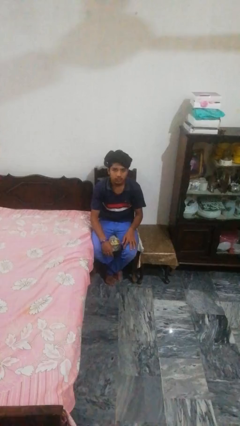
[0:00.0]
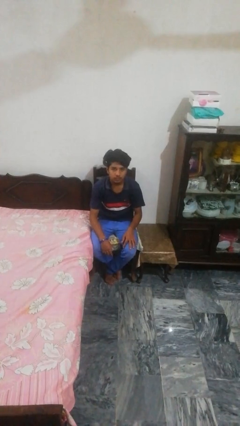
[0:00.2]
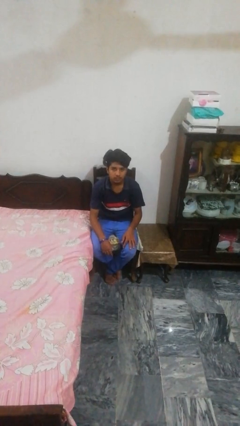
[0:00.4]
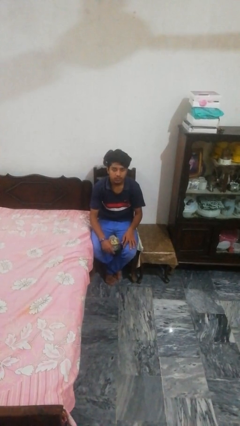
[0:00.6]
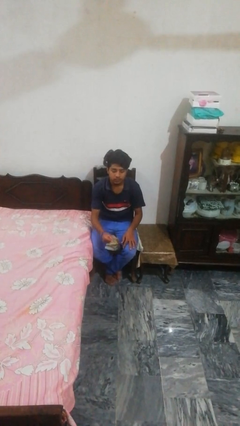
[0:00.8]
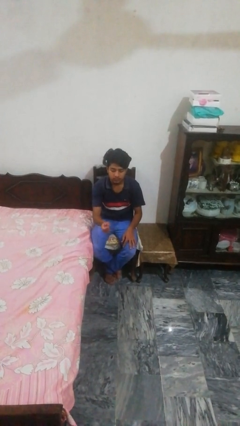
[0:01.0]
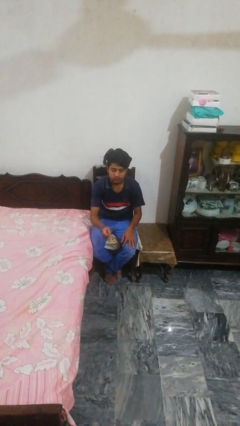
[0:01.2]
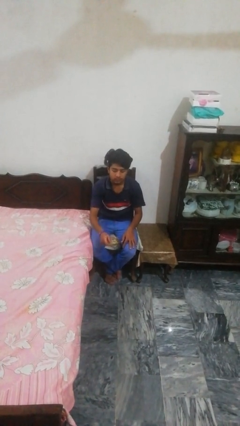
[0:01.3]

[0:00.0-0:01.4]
person snaps fingers

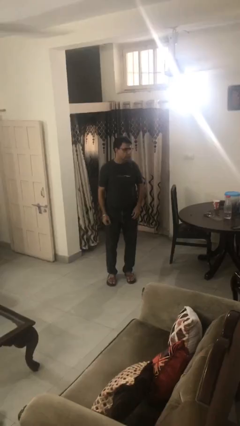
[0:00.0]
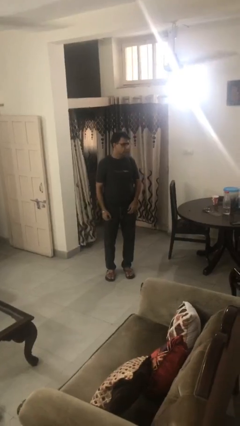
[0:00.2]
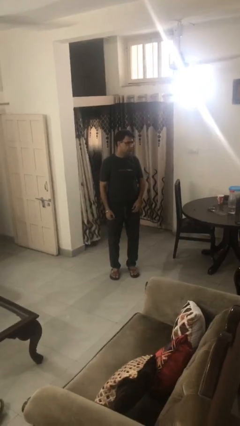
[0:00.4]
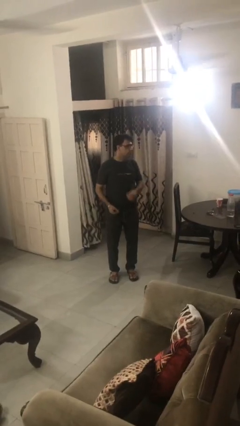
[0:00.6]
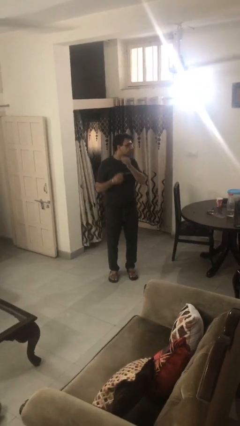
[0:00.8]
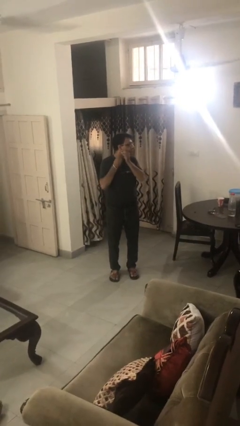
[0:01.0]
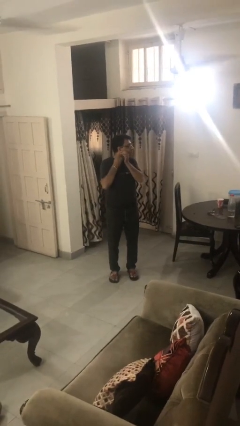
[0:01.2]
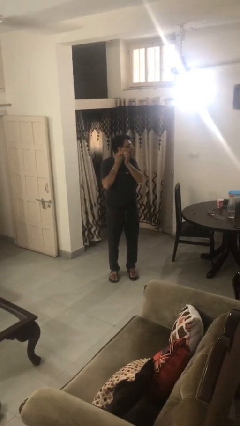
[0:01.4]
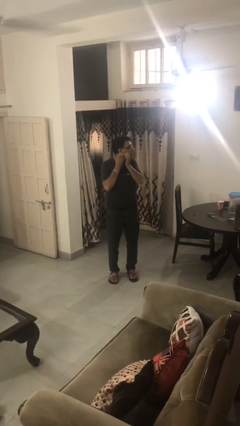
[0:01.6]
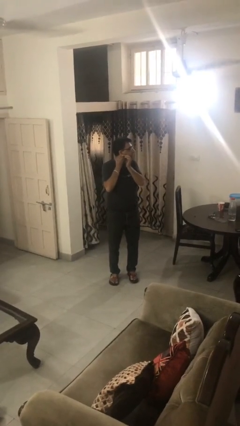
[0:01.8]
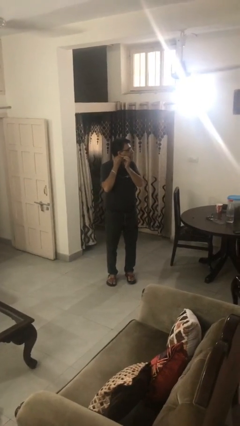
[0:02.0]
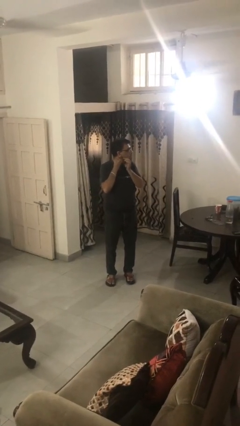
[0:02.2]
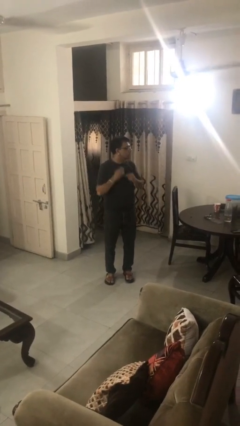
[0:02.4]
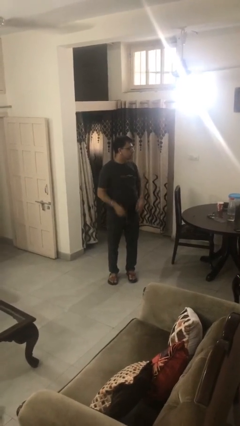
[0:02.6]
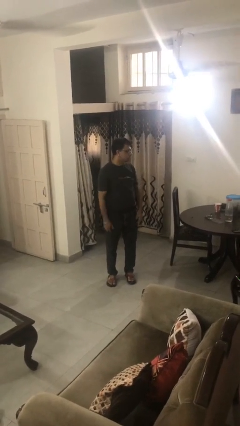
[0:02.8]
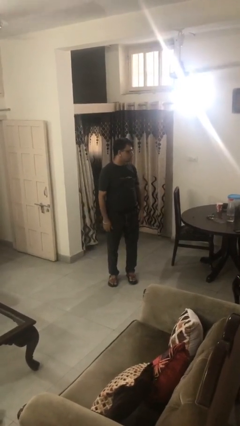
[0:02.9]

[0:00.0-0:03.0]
person puts on earrings

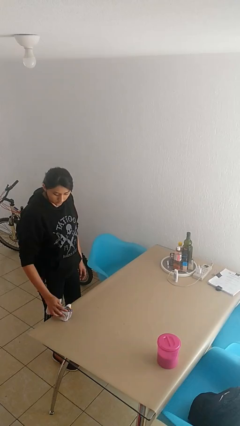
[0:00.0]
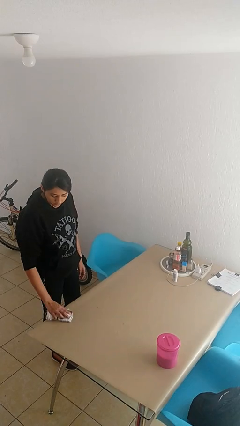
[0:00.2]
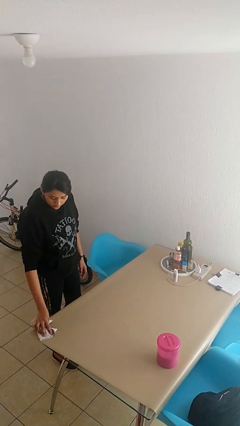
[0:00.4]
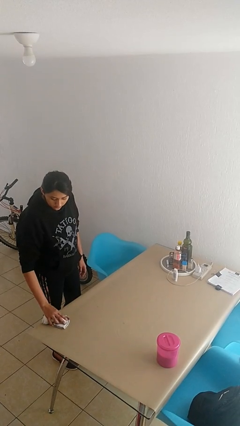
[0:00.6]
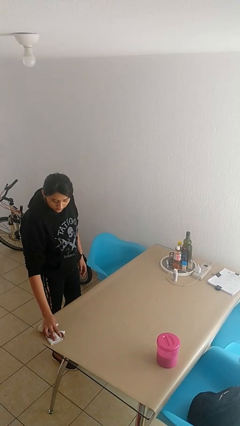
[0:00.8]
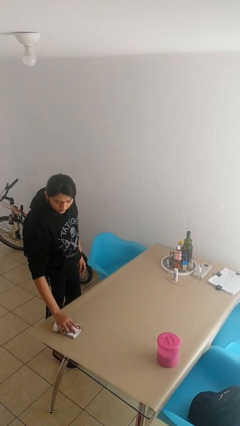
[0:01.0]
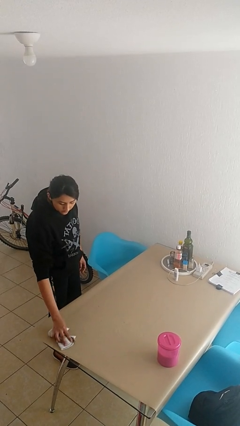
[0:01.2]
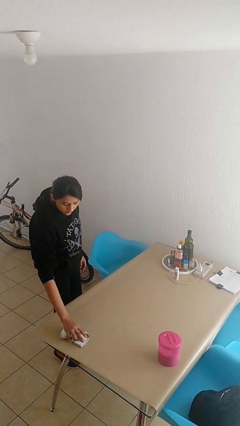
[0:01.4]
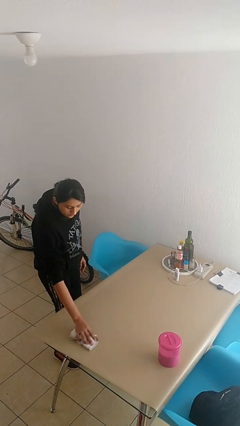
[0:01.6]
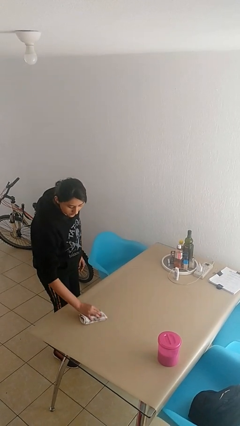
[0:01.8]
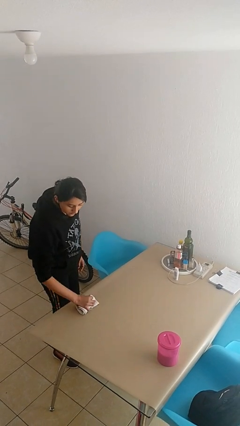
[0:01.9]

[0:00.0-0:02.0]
person cleans table with rag

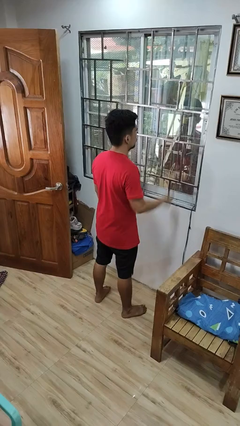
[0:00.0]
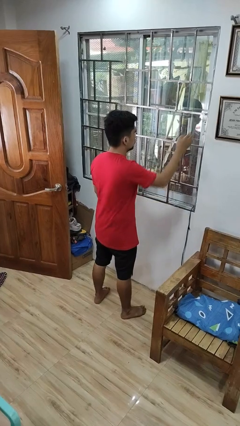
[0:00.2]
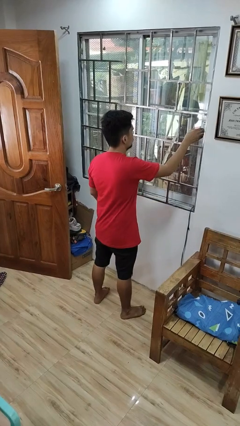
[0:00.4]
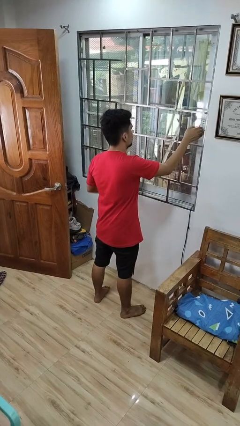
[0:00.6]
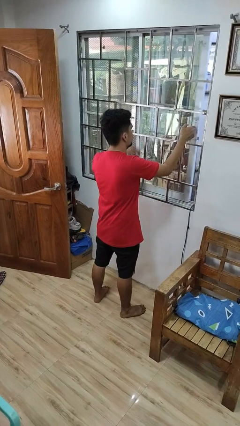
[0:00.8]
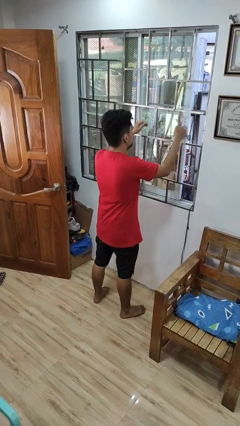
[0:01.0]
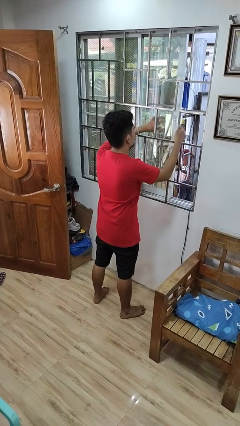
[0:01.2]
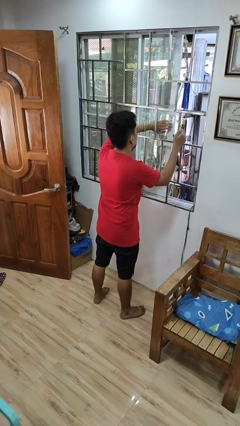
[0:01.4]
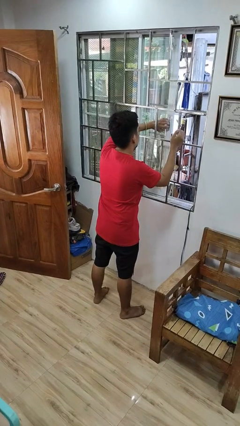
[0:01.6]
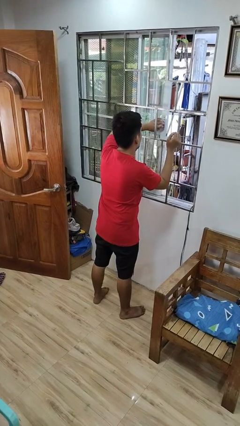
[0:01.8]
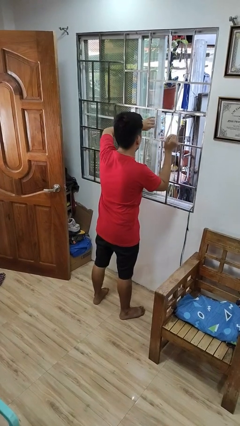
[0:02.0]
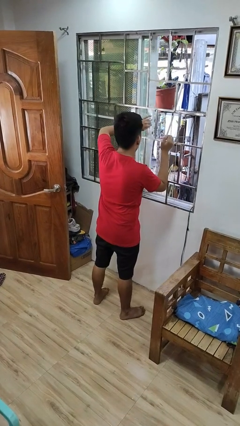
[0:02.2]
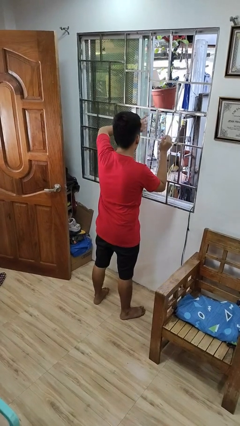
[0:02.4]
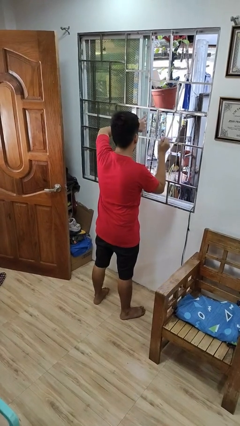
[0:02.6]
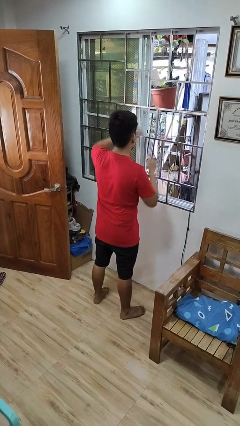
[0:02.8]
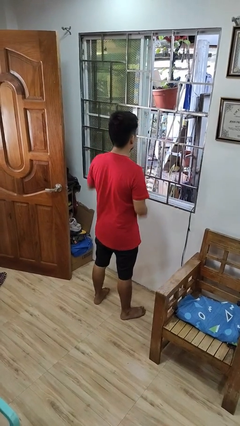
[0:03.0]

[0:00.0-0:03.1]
person opens home window

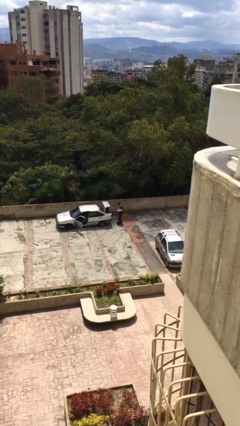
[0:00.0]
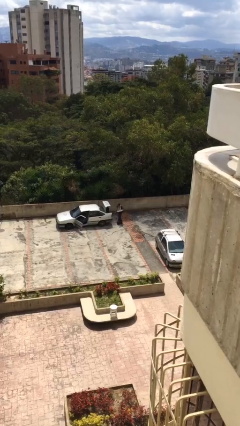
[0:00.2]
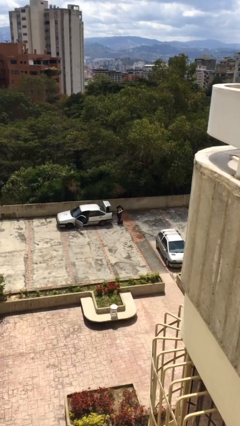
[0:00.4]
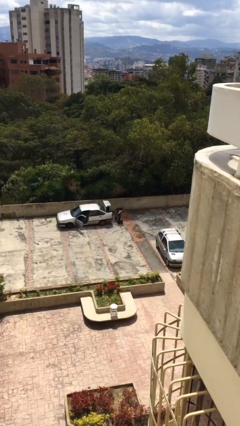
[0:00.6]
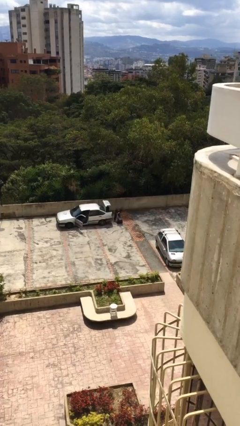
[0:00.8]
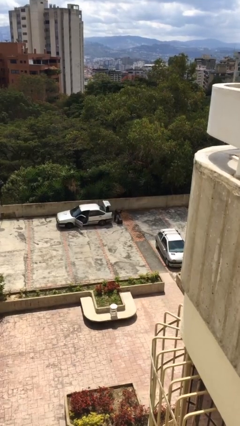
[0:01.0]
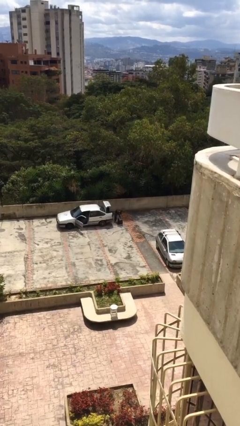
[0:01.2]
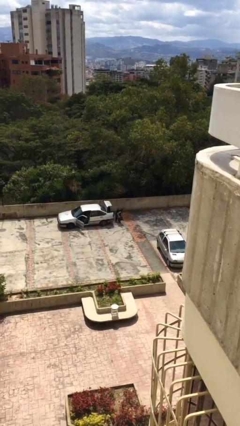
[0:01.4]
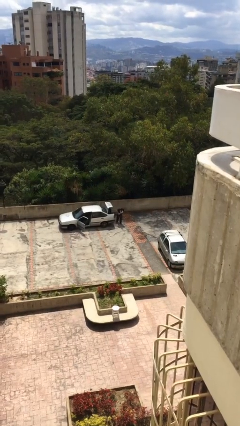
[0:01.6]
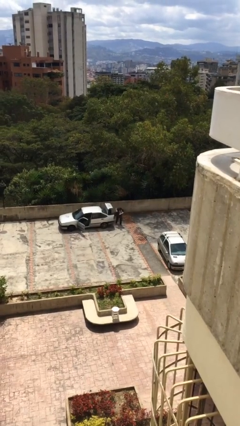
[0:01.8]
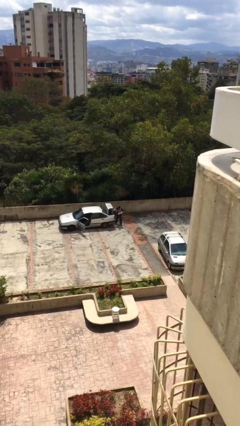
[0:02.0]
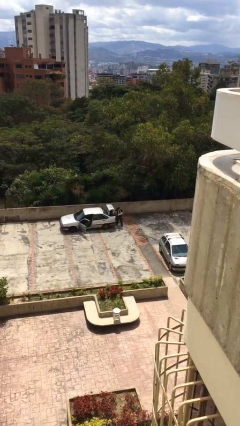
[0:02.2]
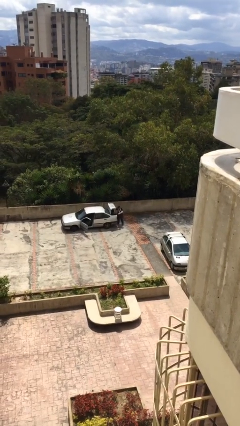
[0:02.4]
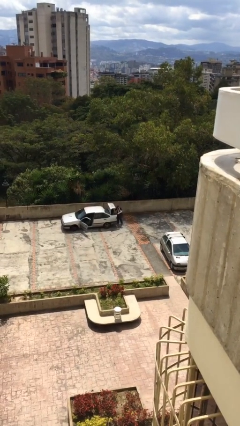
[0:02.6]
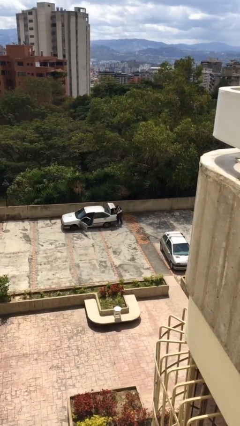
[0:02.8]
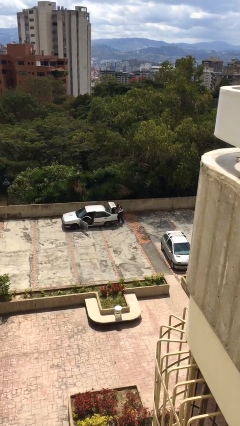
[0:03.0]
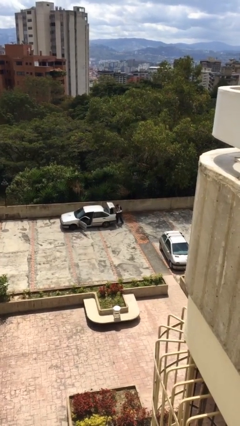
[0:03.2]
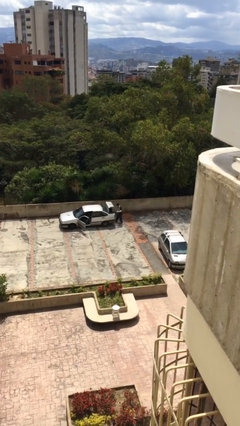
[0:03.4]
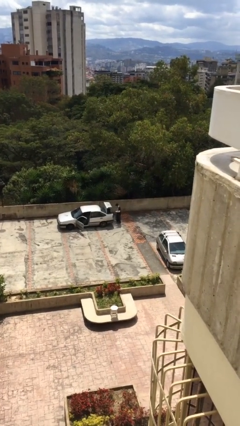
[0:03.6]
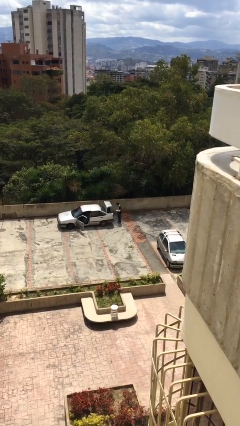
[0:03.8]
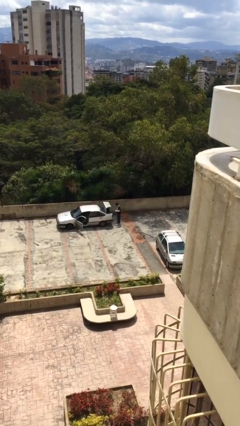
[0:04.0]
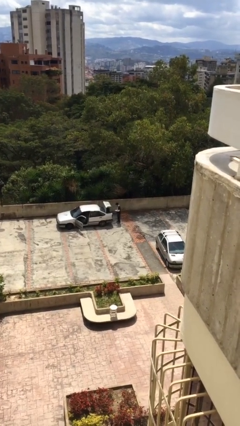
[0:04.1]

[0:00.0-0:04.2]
person loads car

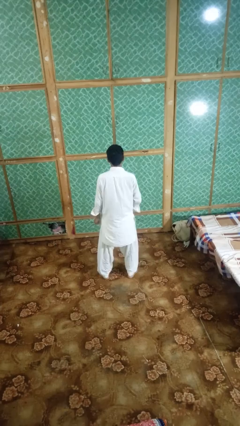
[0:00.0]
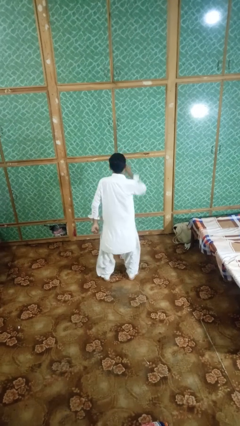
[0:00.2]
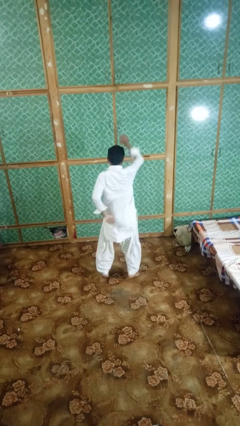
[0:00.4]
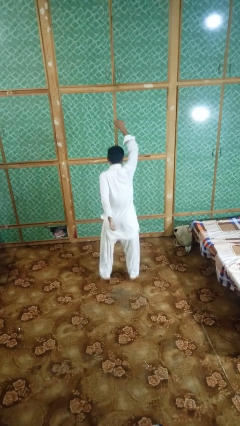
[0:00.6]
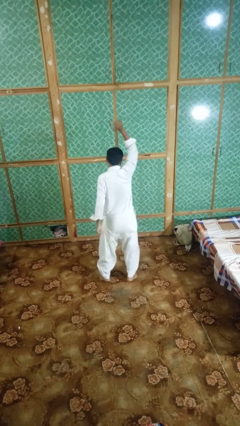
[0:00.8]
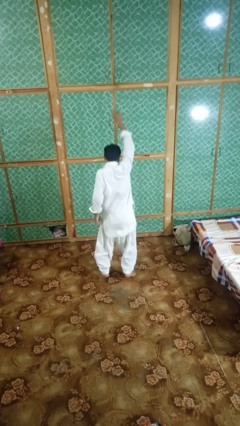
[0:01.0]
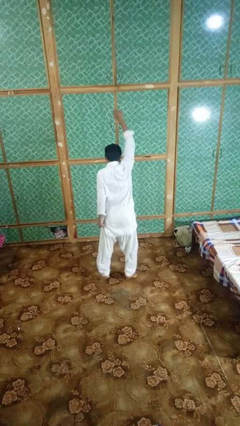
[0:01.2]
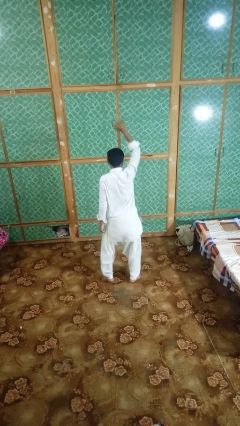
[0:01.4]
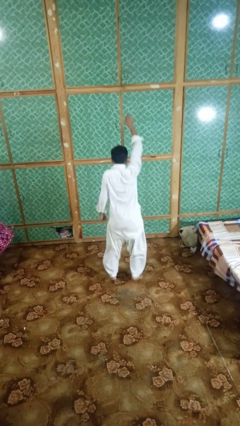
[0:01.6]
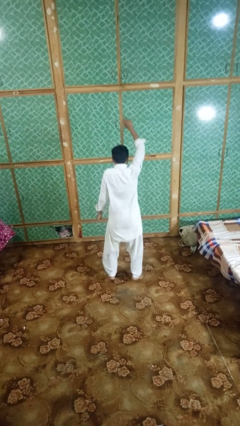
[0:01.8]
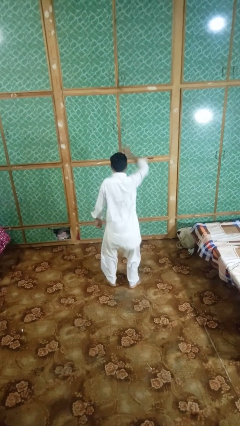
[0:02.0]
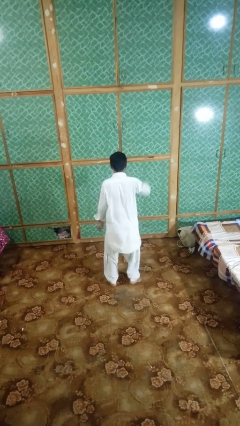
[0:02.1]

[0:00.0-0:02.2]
person dances in place

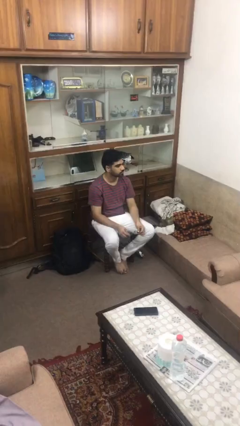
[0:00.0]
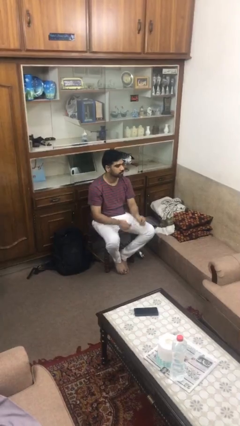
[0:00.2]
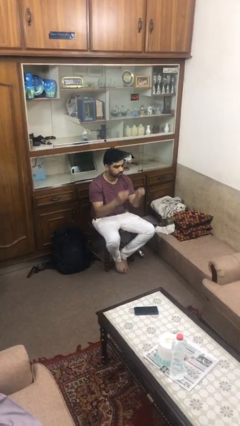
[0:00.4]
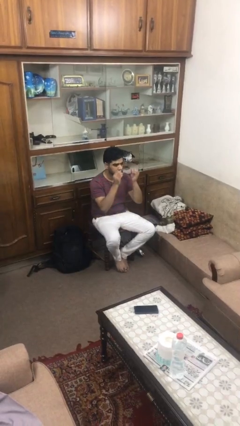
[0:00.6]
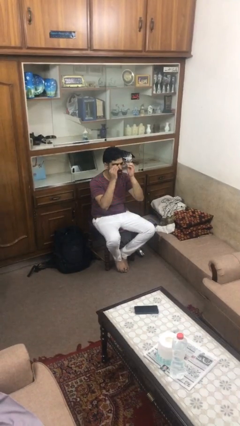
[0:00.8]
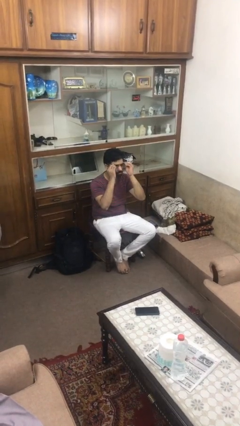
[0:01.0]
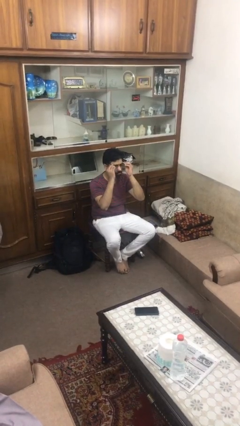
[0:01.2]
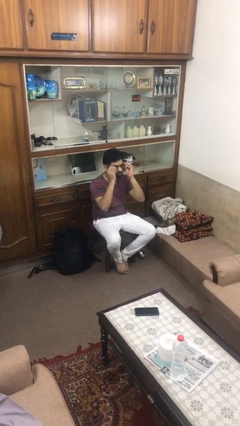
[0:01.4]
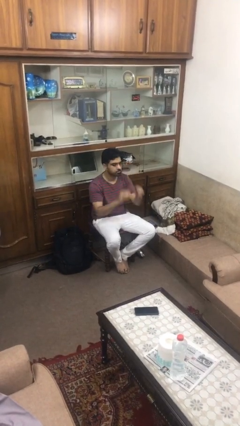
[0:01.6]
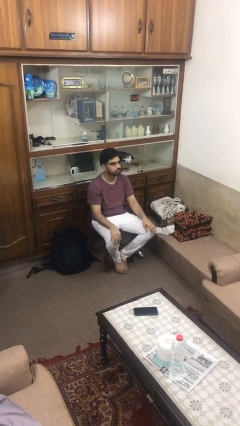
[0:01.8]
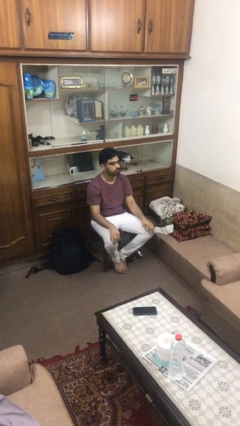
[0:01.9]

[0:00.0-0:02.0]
person puts on glasses
